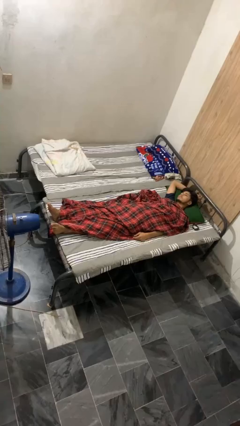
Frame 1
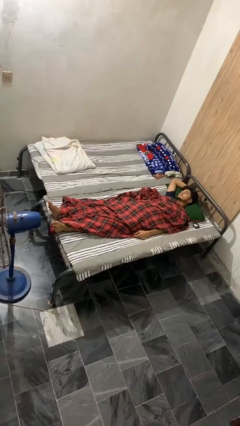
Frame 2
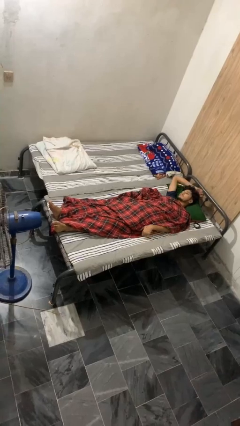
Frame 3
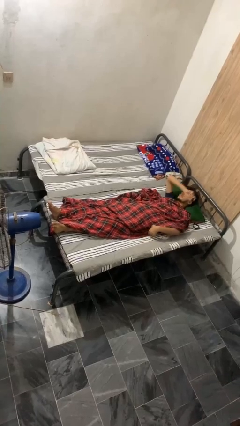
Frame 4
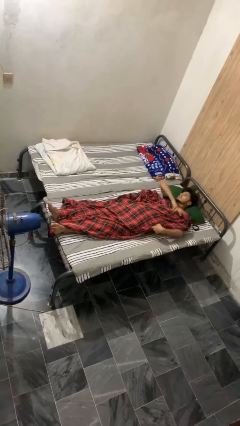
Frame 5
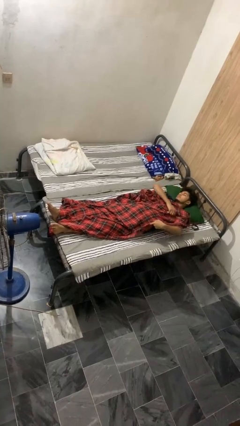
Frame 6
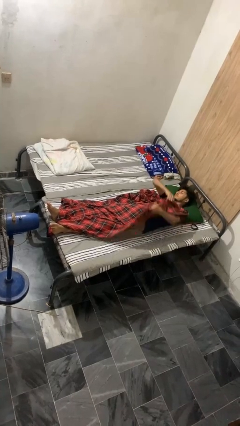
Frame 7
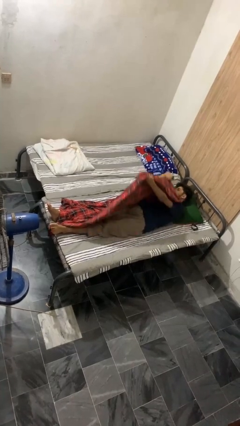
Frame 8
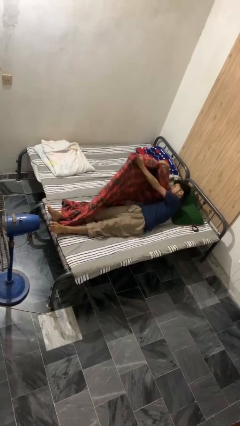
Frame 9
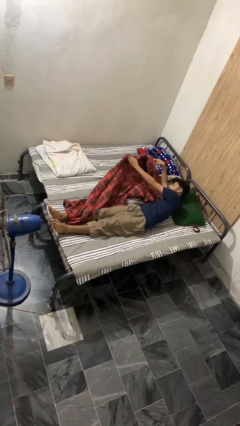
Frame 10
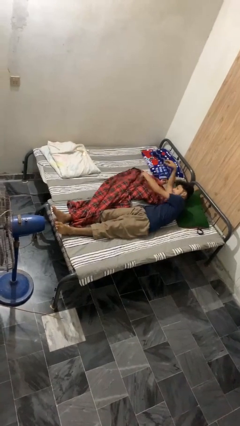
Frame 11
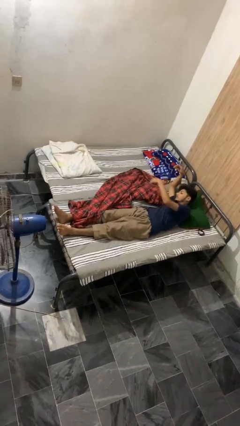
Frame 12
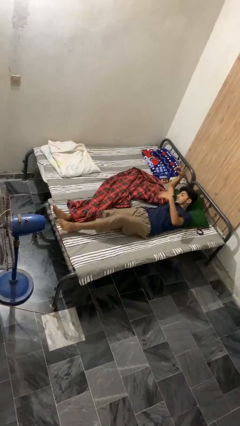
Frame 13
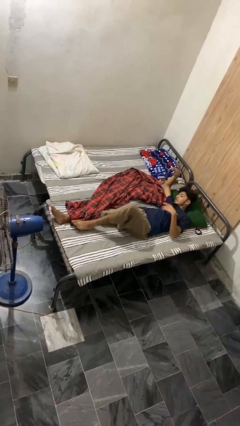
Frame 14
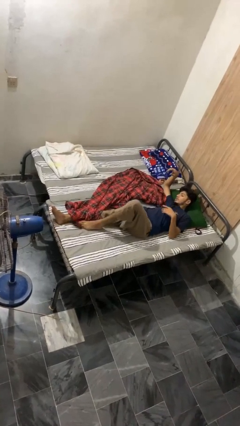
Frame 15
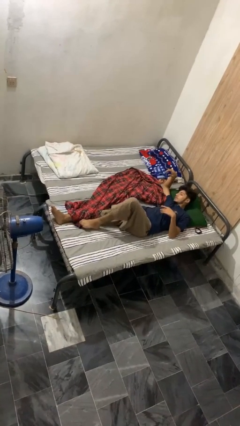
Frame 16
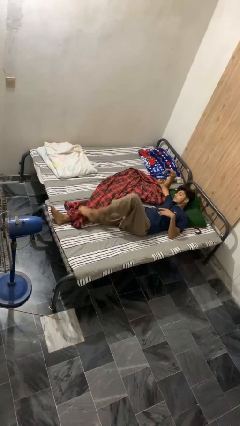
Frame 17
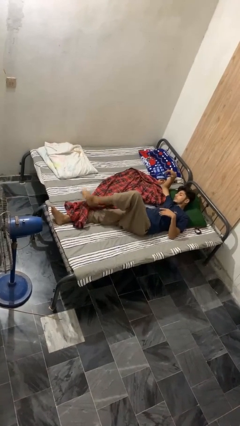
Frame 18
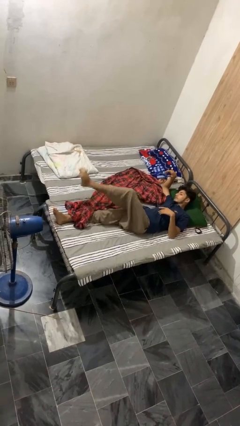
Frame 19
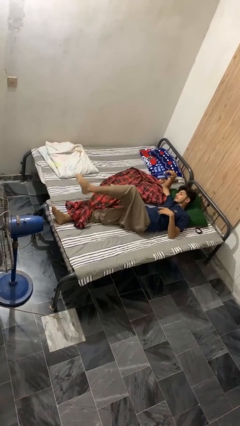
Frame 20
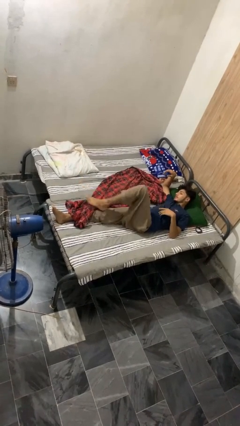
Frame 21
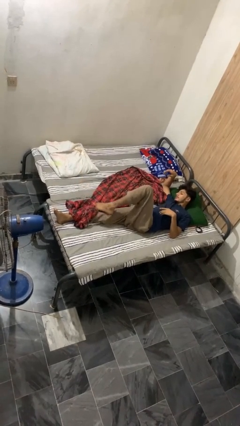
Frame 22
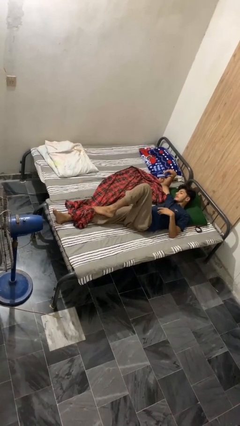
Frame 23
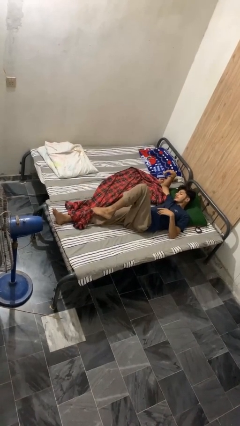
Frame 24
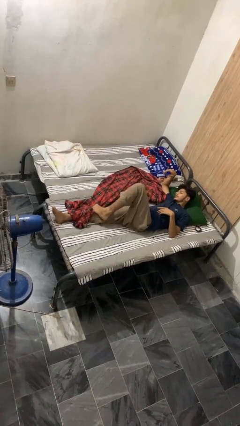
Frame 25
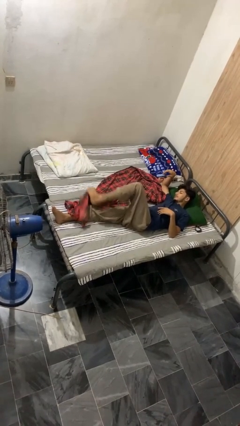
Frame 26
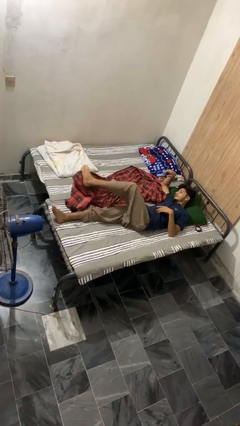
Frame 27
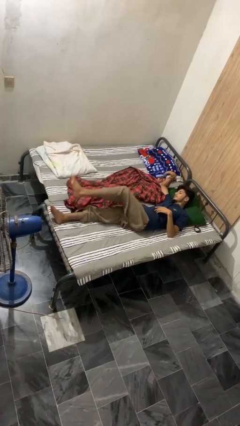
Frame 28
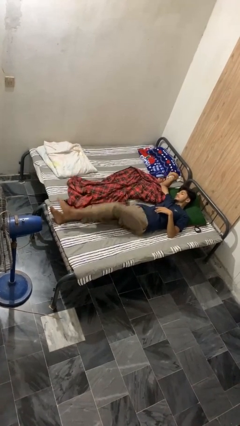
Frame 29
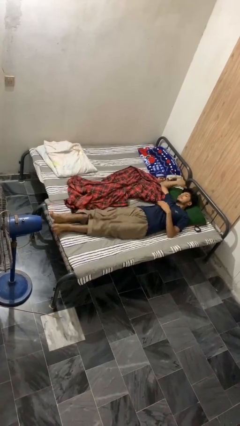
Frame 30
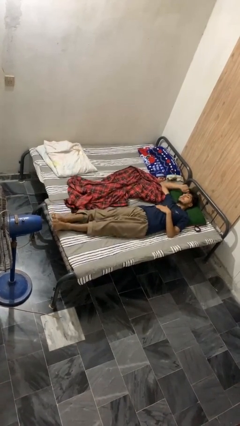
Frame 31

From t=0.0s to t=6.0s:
person uncovers with bedsheets

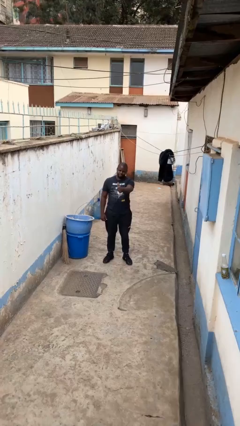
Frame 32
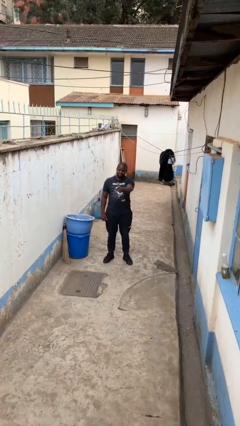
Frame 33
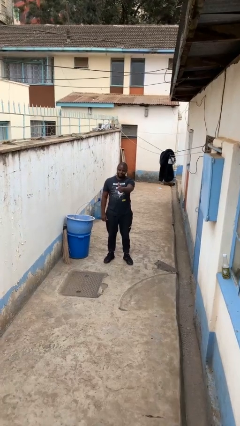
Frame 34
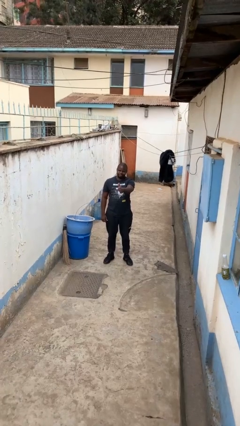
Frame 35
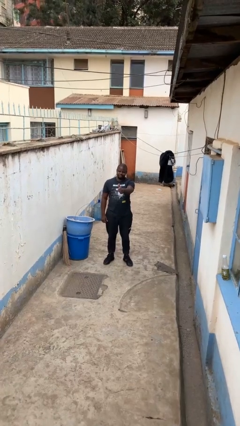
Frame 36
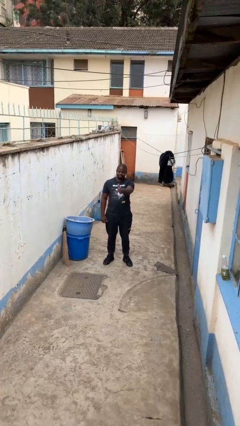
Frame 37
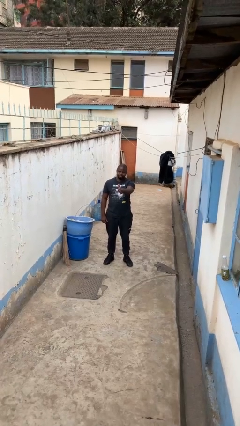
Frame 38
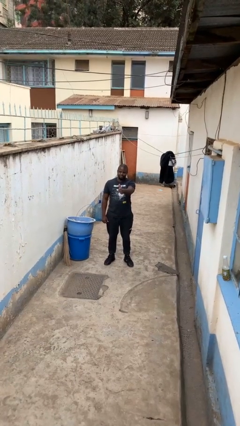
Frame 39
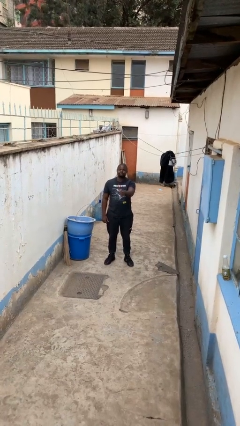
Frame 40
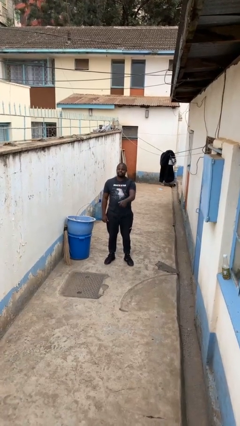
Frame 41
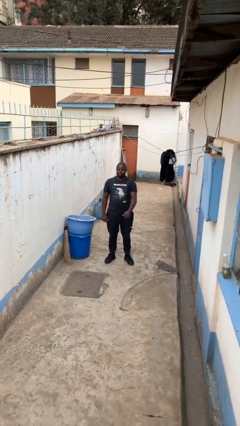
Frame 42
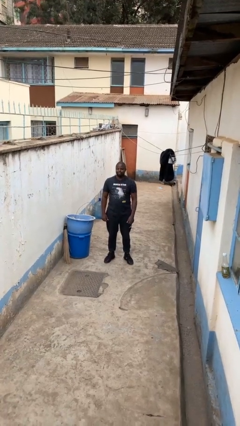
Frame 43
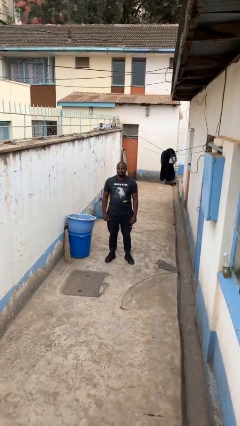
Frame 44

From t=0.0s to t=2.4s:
person gestures thumbs up

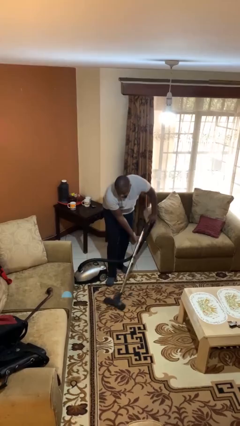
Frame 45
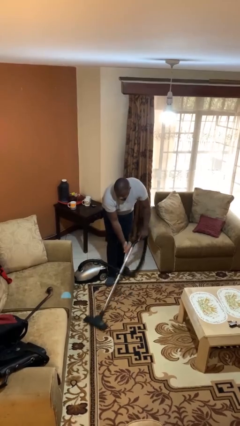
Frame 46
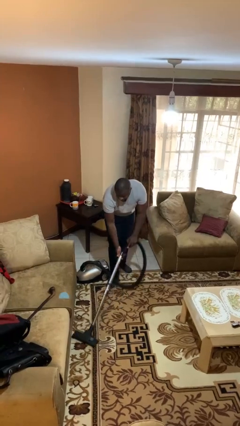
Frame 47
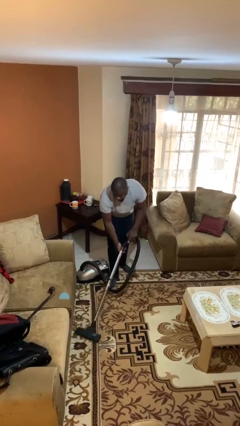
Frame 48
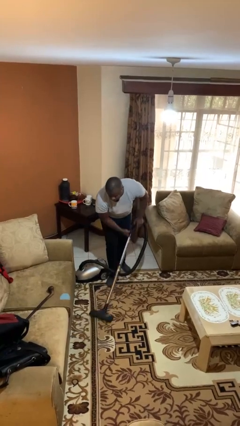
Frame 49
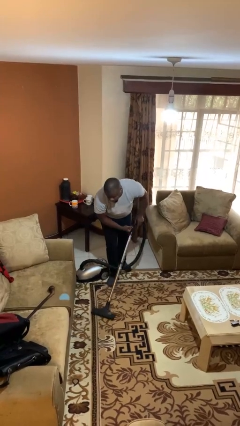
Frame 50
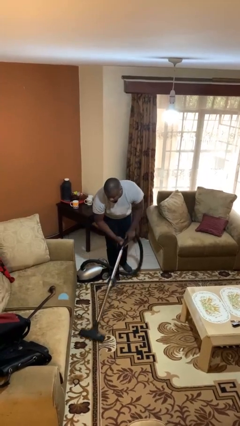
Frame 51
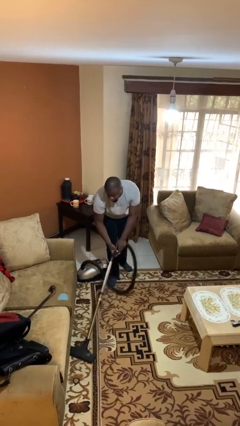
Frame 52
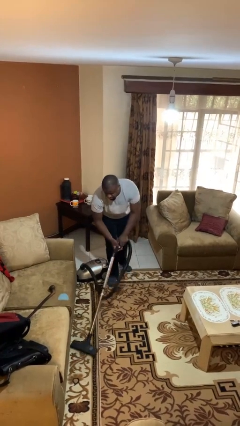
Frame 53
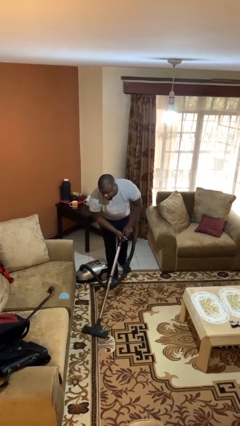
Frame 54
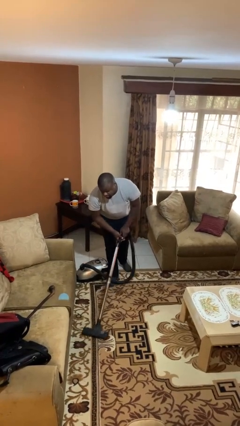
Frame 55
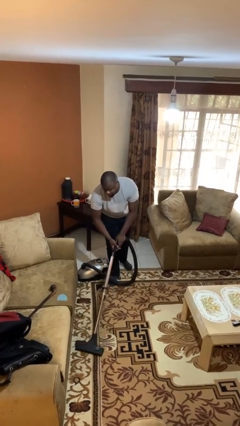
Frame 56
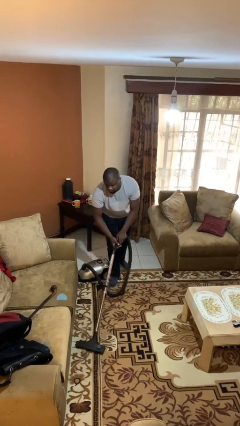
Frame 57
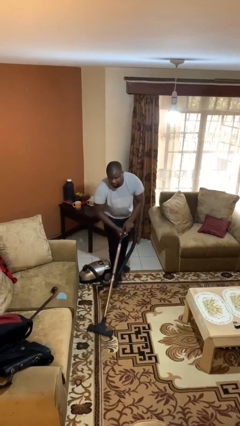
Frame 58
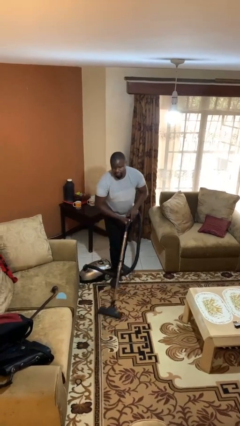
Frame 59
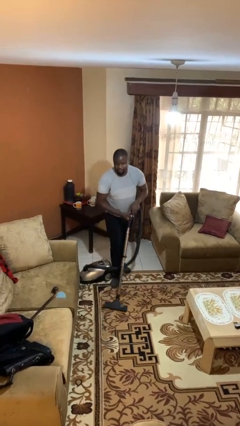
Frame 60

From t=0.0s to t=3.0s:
person vacuums carpet

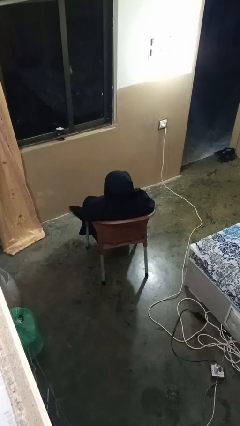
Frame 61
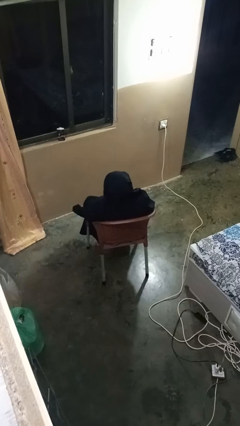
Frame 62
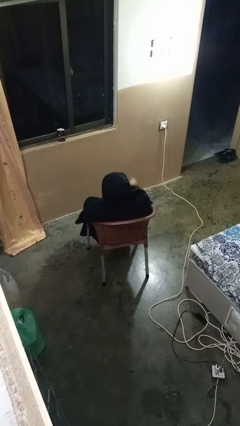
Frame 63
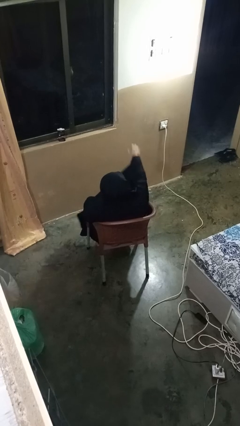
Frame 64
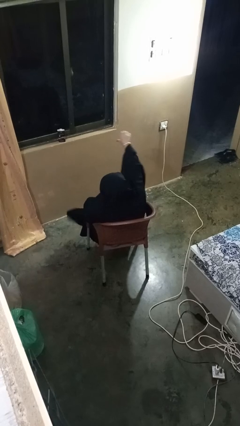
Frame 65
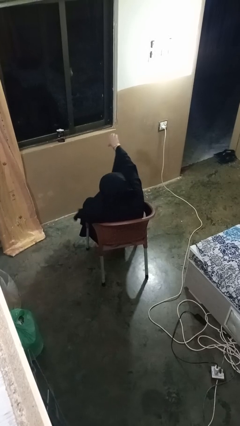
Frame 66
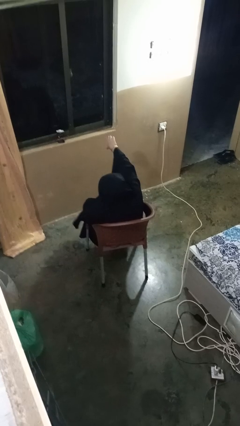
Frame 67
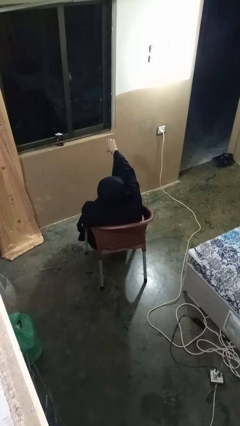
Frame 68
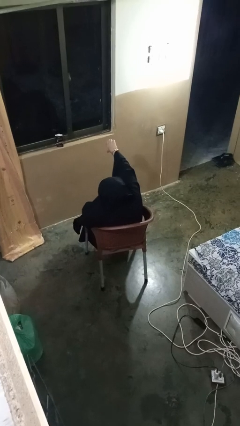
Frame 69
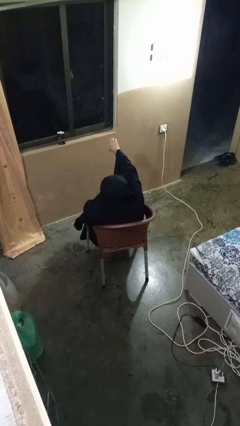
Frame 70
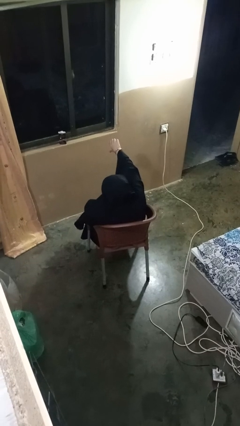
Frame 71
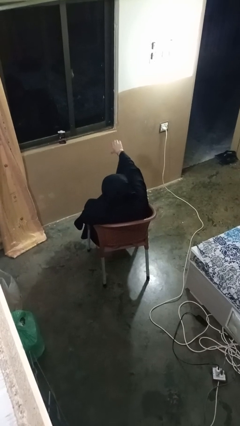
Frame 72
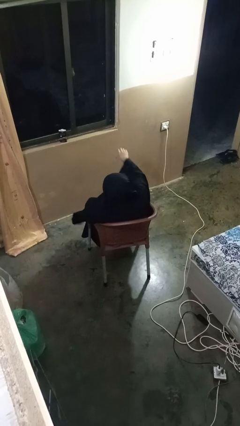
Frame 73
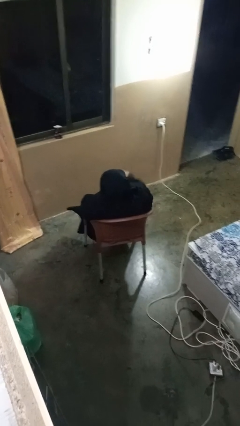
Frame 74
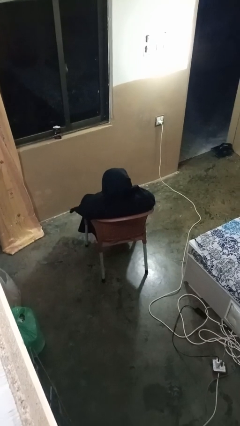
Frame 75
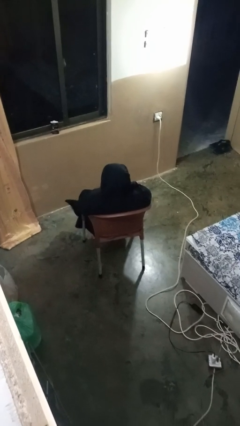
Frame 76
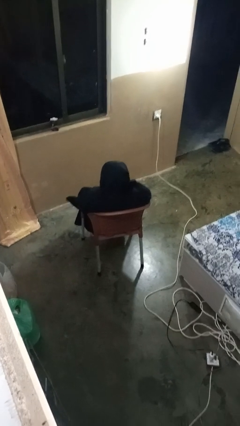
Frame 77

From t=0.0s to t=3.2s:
person gestures thumbs down

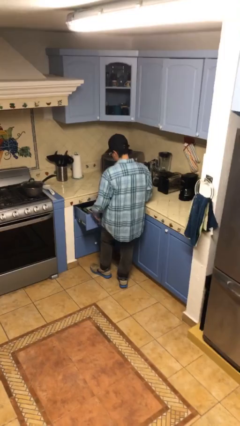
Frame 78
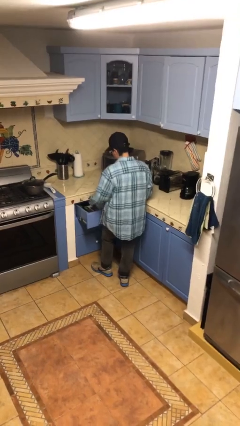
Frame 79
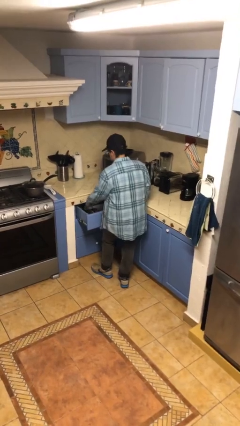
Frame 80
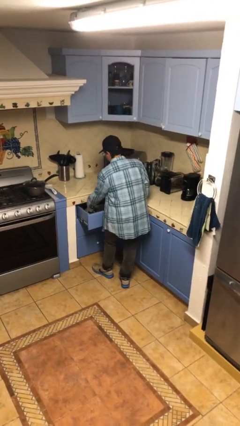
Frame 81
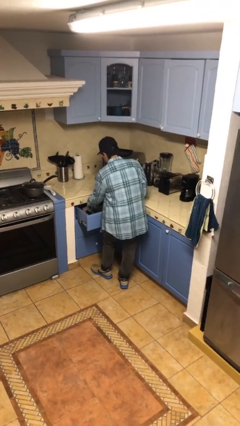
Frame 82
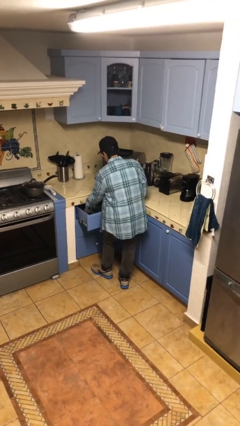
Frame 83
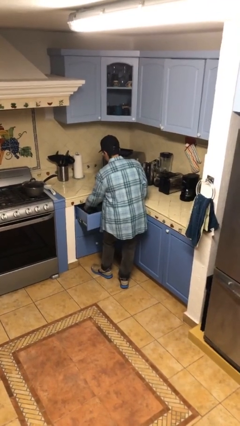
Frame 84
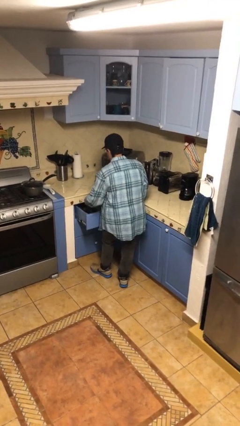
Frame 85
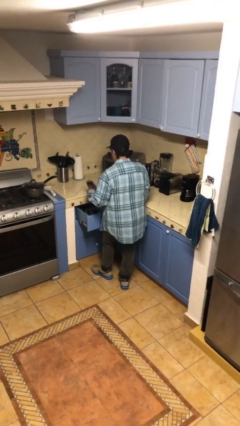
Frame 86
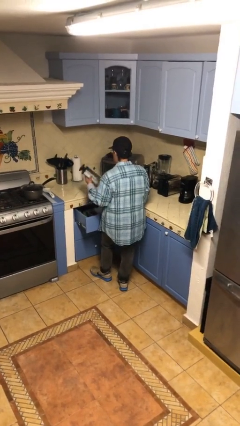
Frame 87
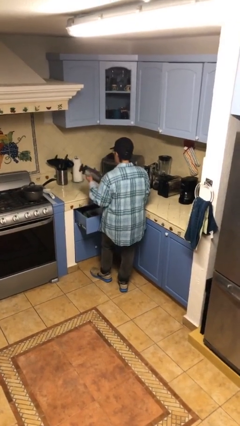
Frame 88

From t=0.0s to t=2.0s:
person takes object from kitchen drawer

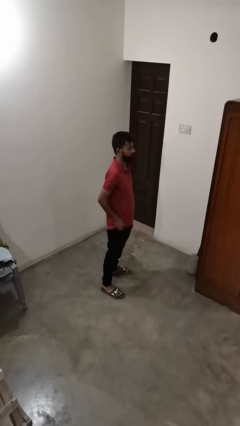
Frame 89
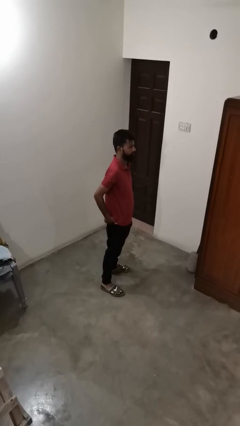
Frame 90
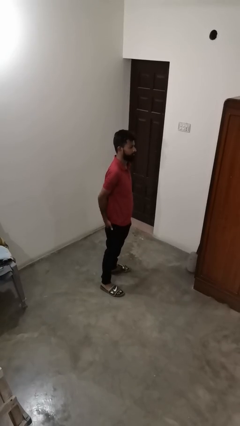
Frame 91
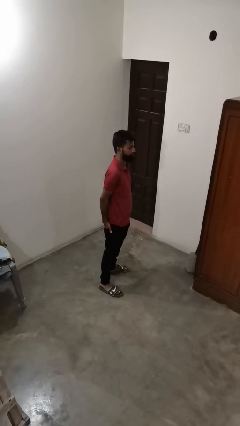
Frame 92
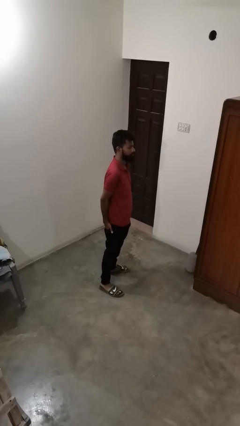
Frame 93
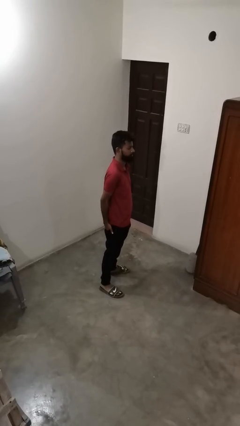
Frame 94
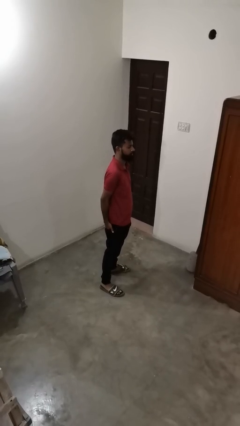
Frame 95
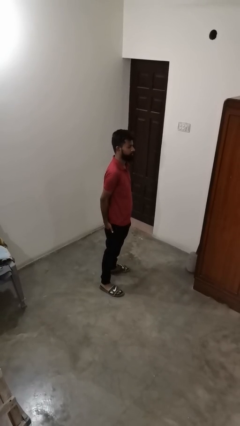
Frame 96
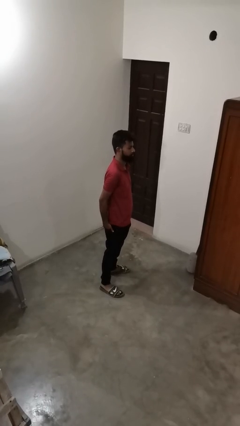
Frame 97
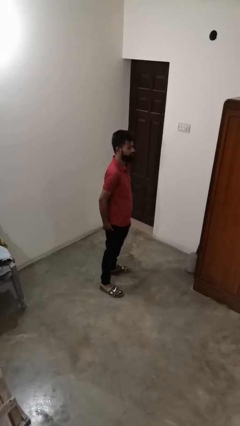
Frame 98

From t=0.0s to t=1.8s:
person puts hands in back pockets
